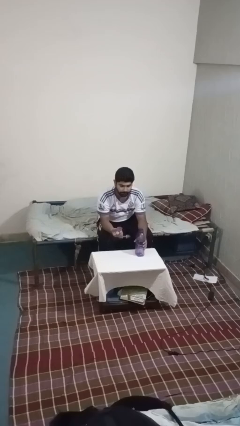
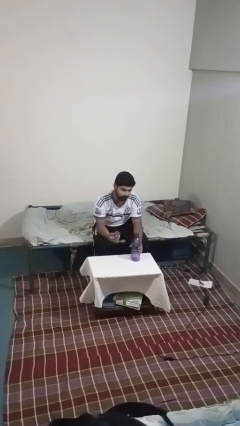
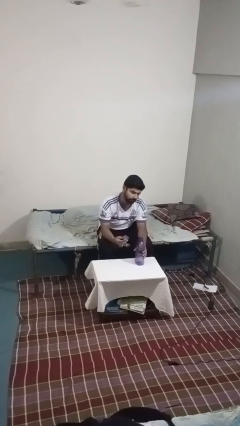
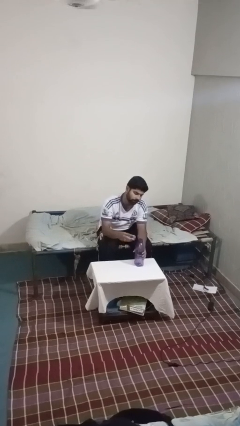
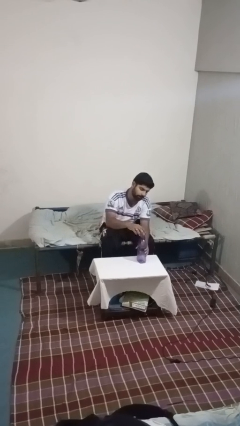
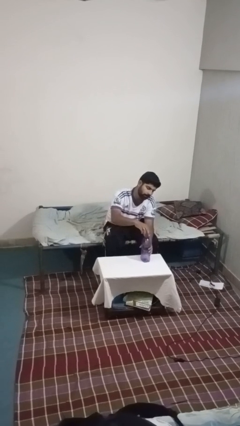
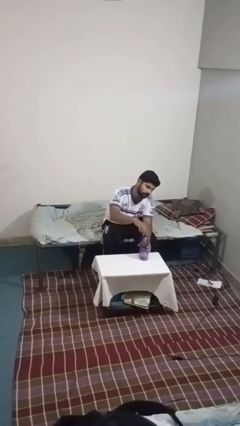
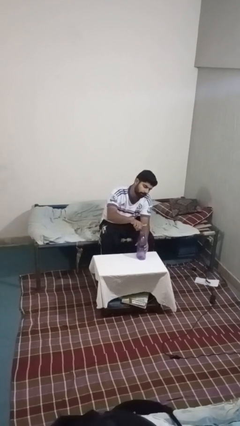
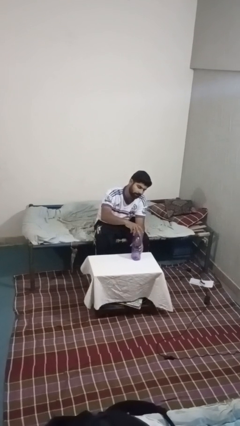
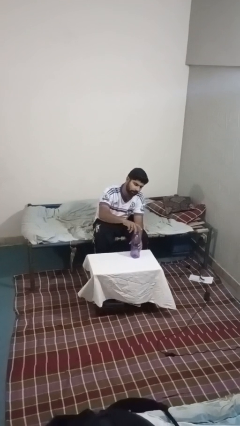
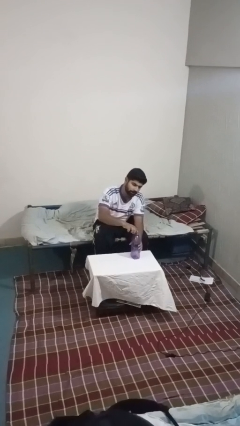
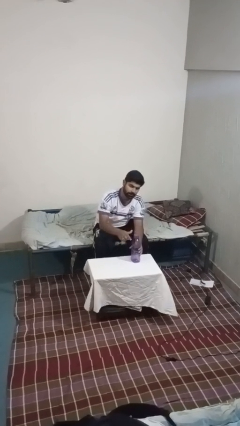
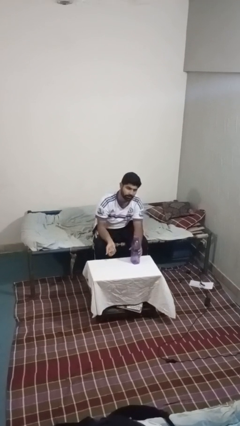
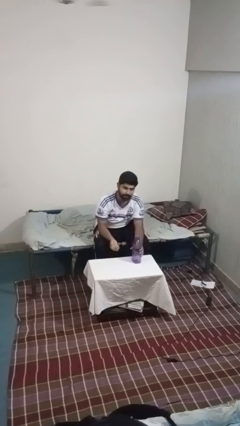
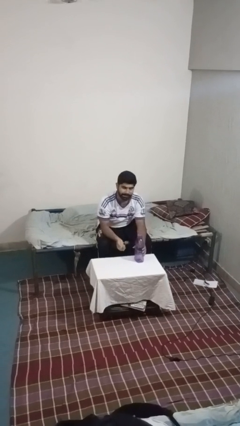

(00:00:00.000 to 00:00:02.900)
person screws lid to bottle

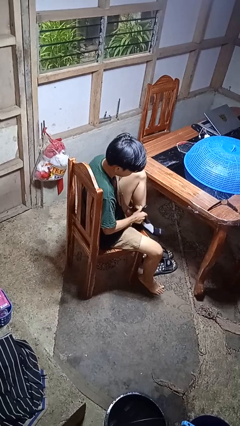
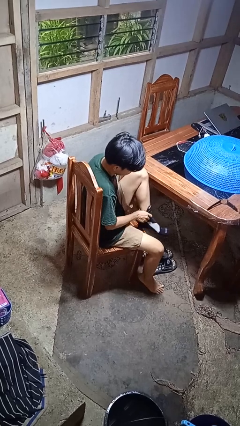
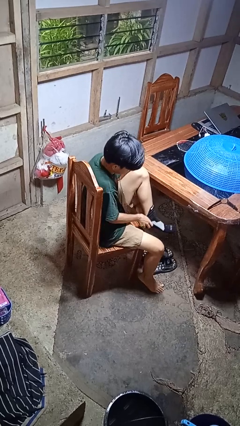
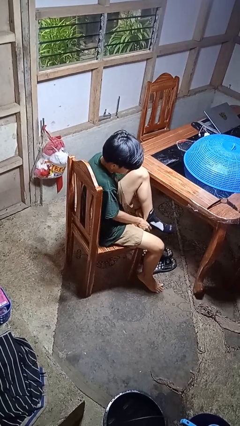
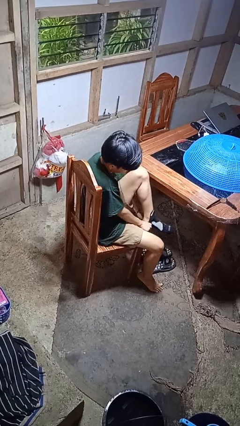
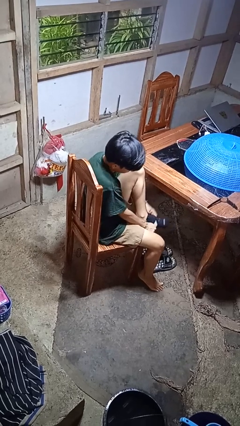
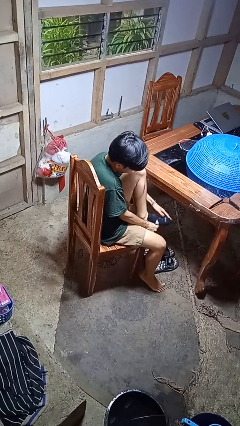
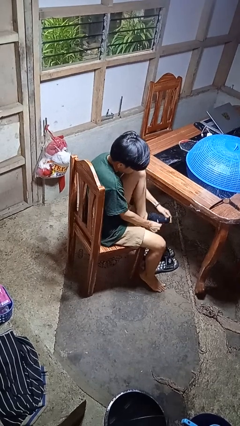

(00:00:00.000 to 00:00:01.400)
person takes off socks

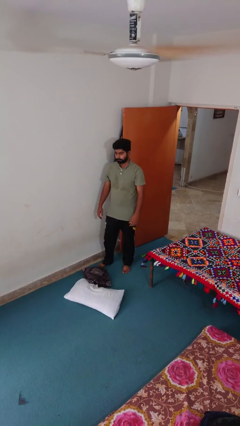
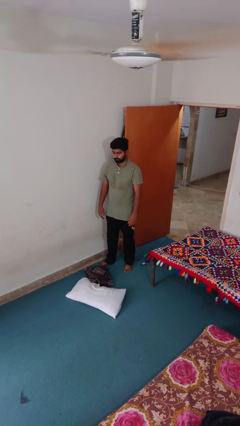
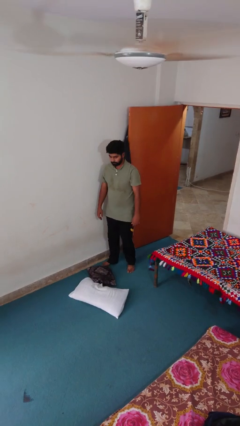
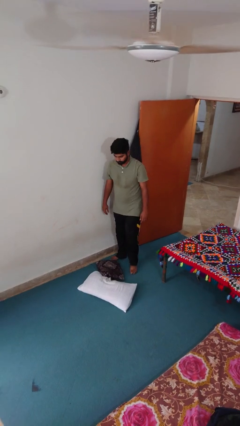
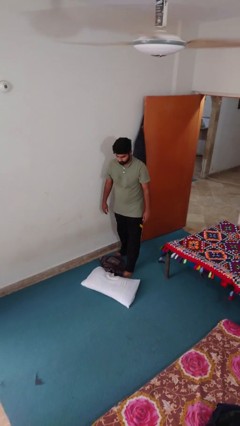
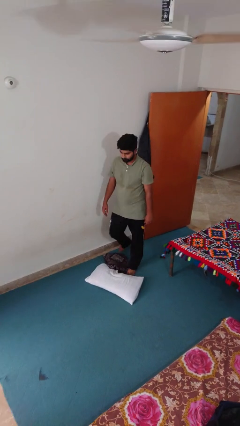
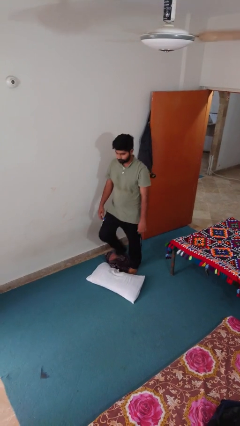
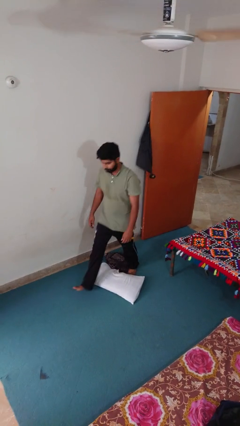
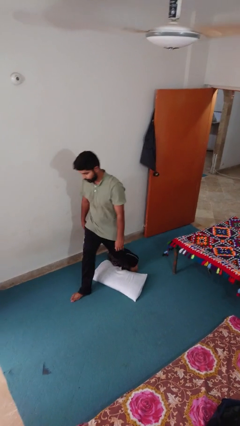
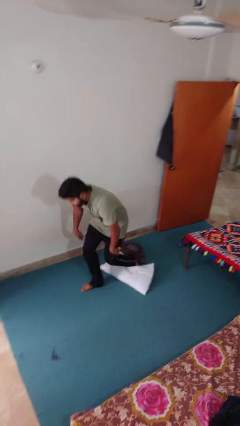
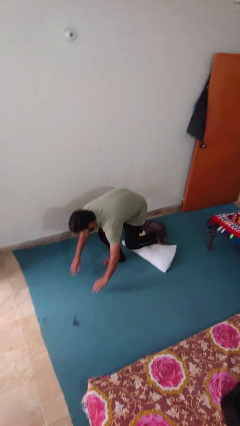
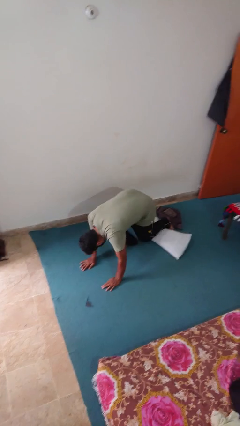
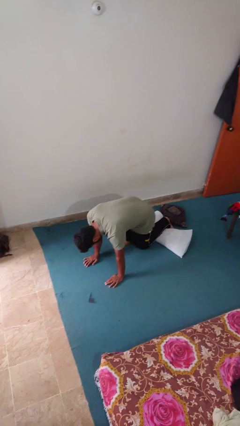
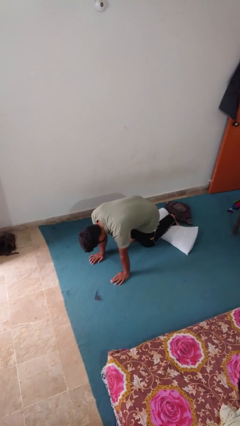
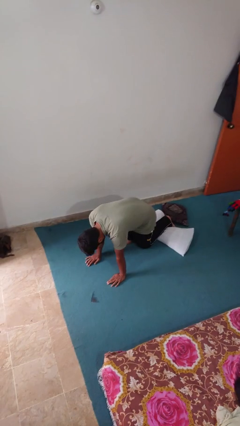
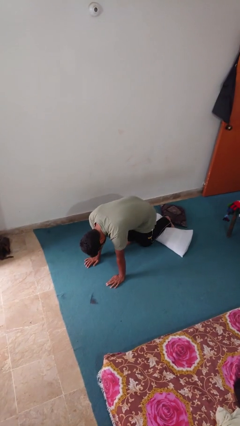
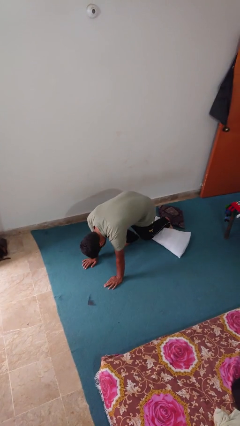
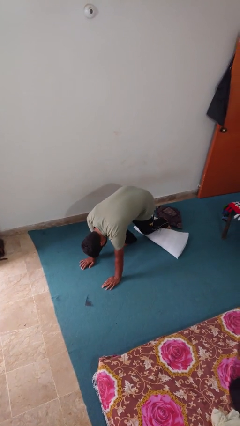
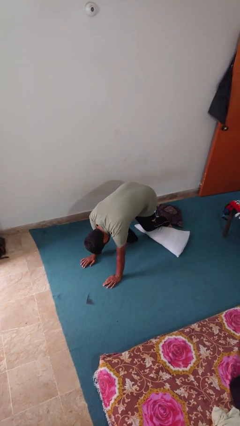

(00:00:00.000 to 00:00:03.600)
person trips on object on floor

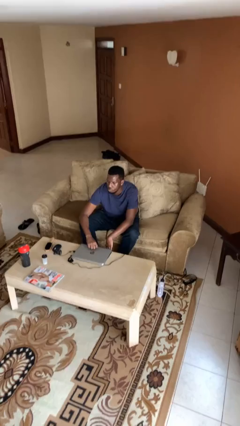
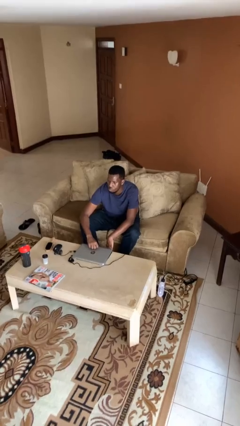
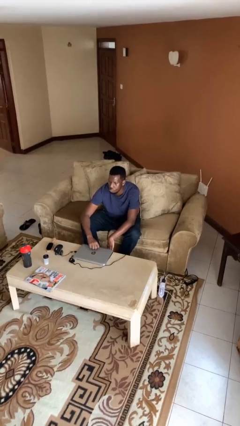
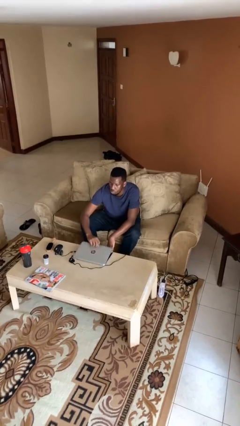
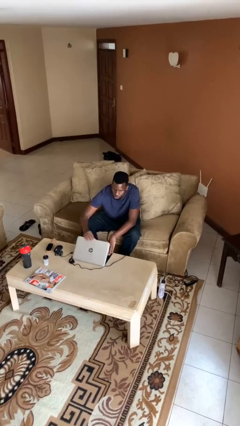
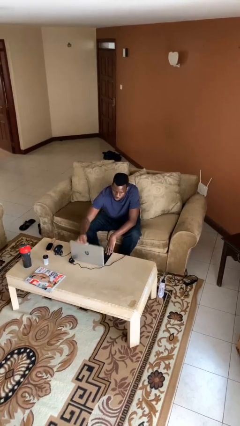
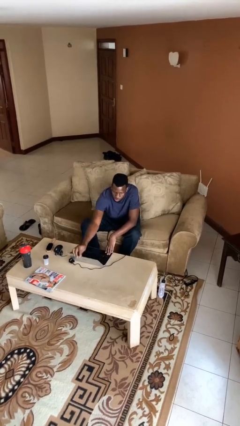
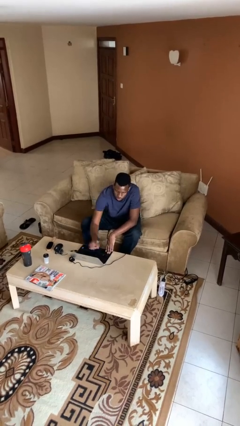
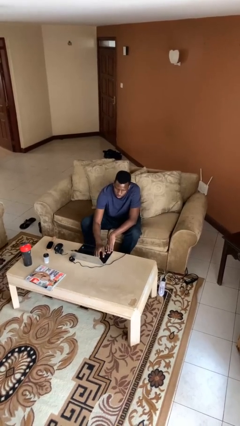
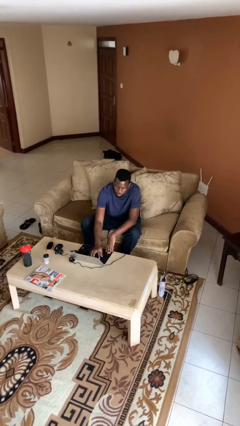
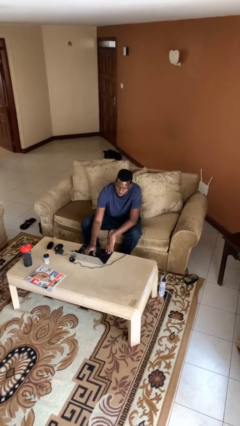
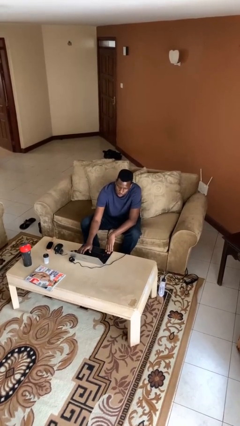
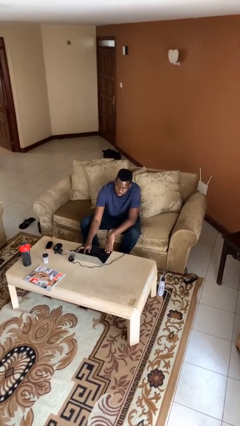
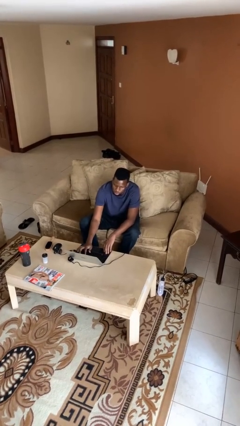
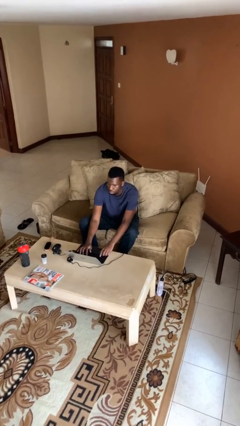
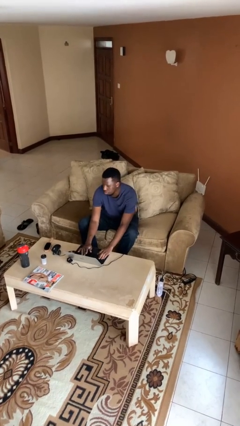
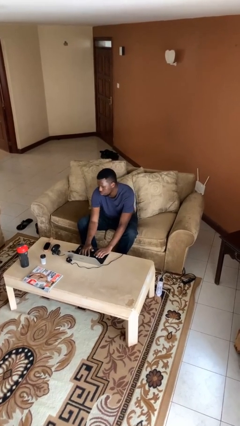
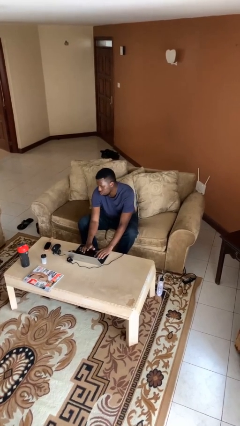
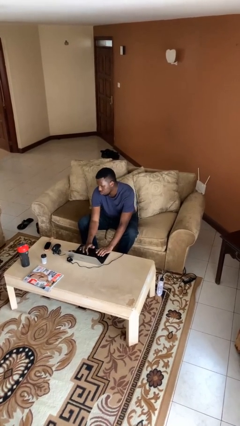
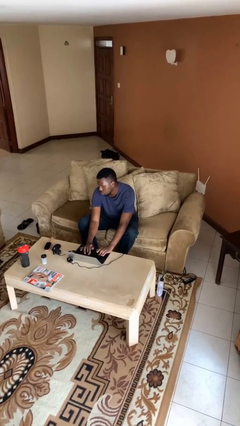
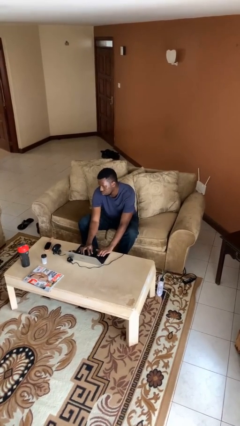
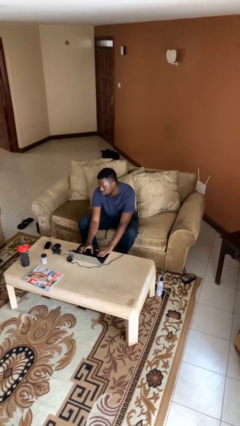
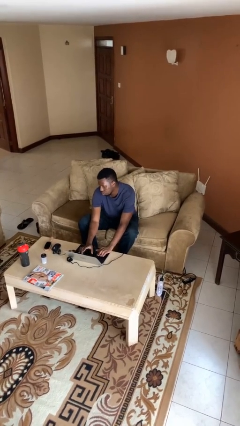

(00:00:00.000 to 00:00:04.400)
person interacts with laptop

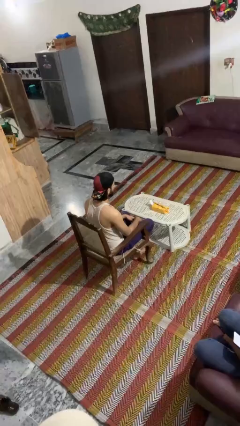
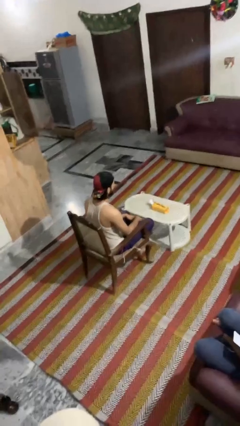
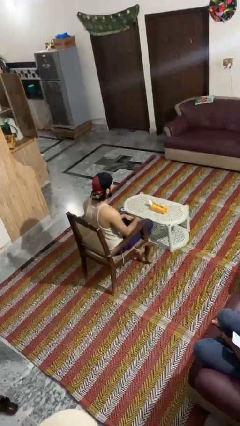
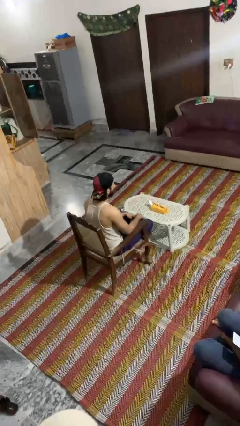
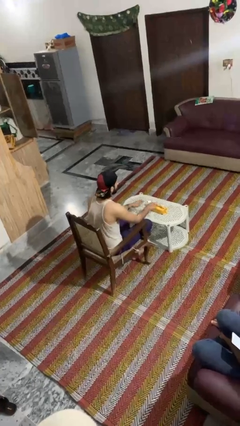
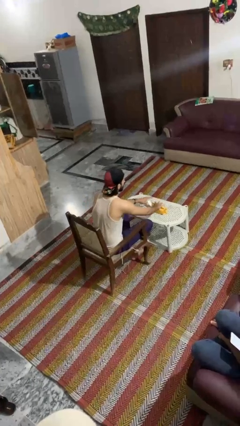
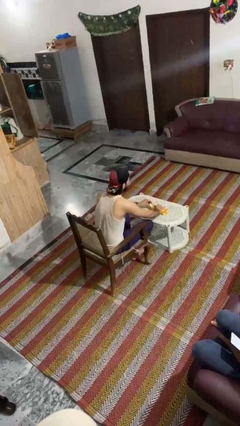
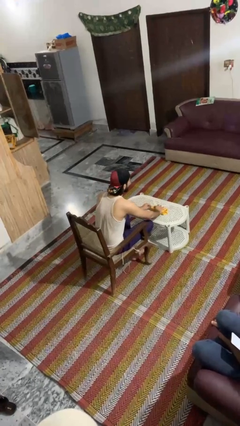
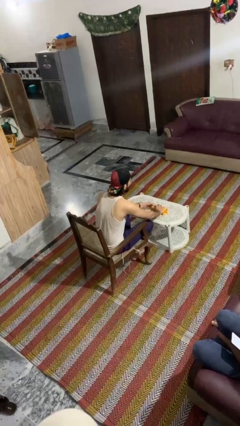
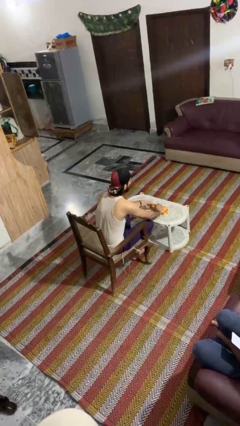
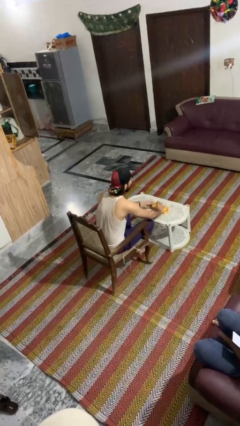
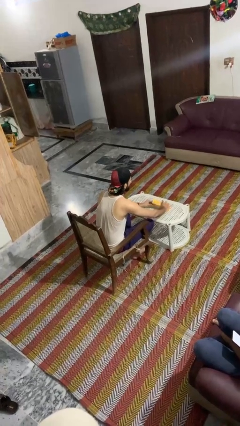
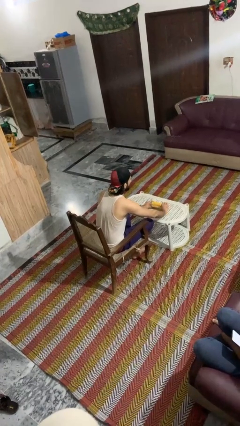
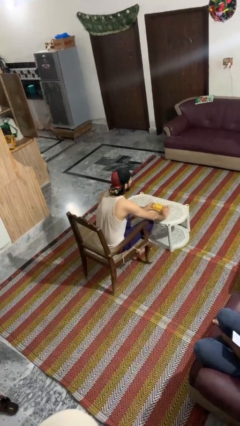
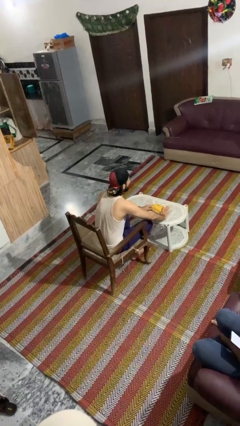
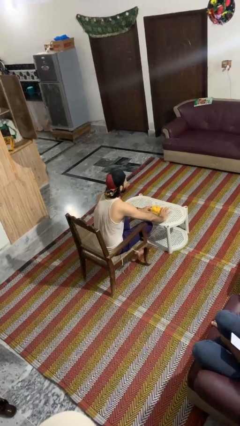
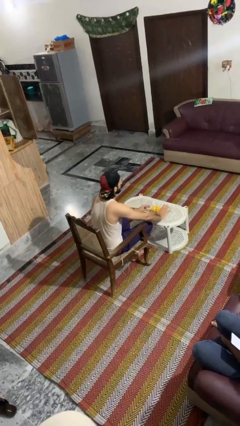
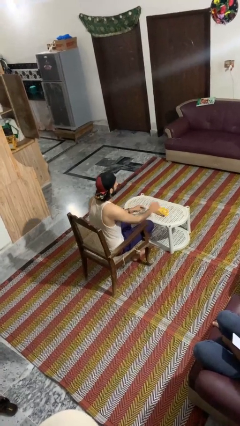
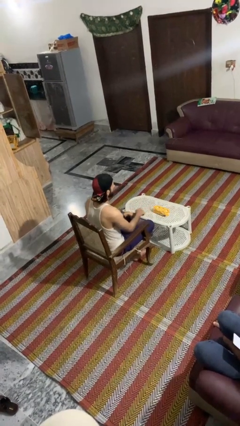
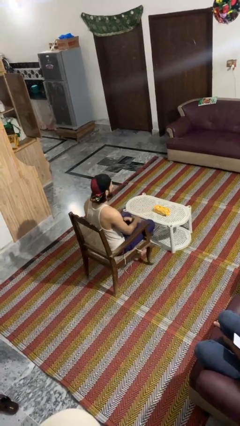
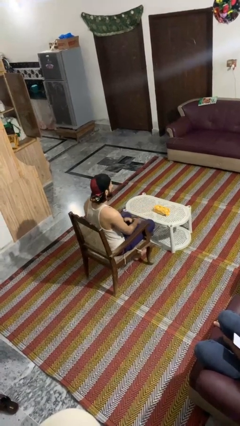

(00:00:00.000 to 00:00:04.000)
person wraps box

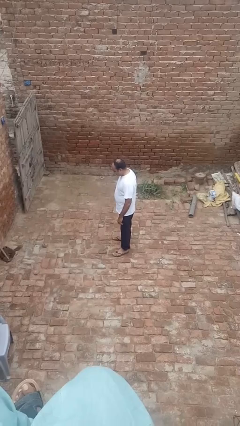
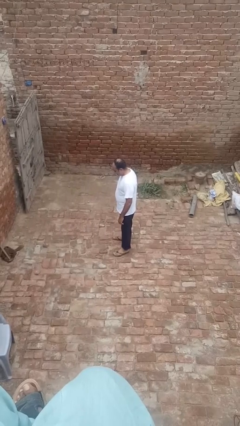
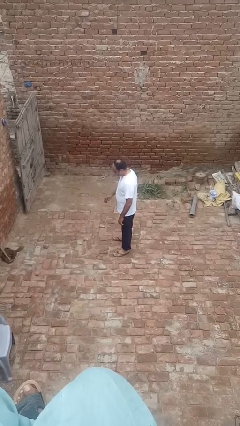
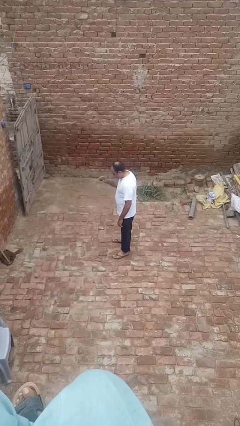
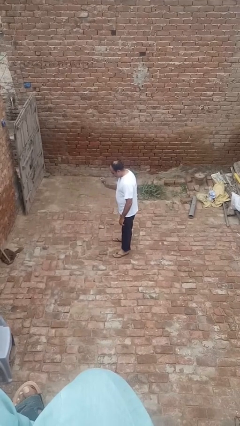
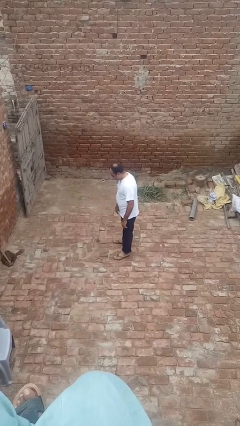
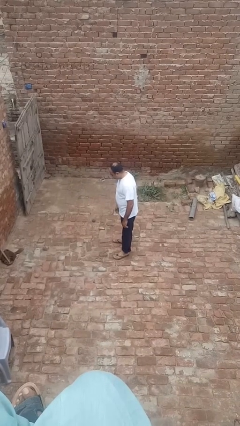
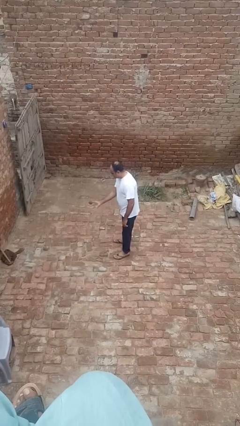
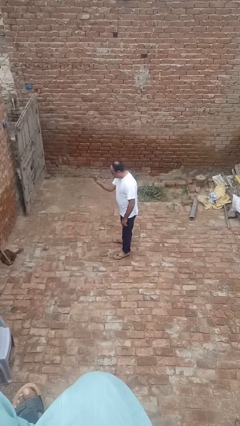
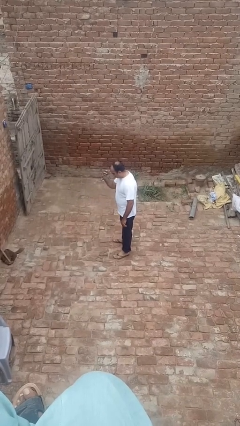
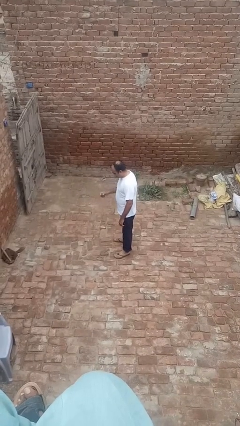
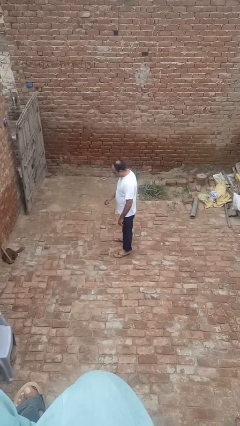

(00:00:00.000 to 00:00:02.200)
person bounces ball on floor
